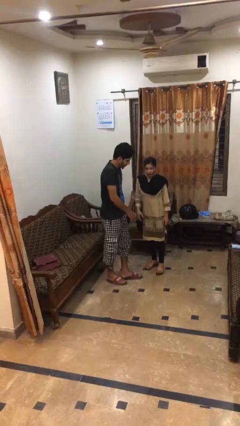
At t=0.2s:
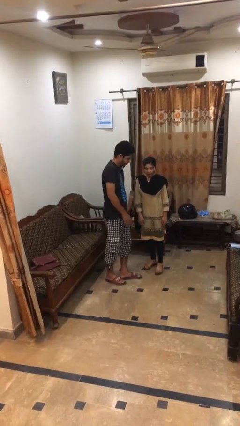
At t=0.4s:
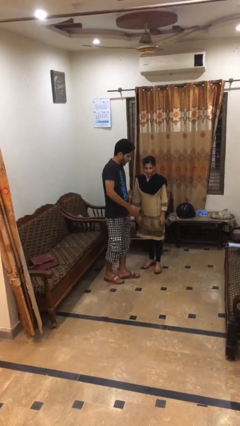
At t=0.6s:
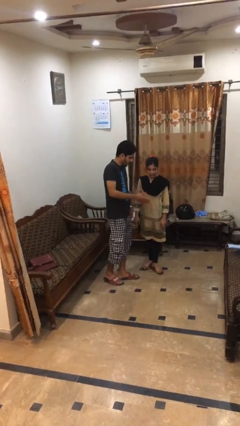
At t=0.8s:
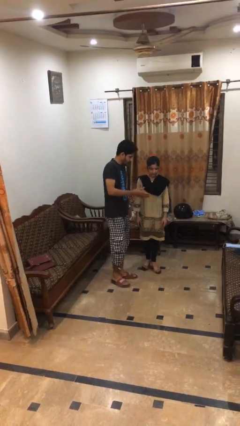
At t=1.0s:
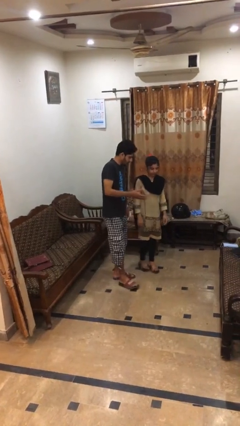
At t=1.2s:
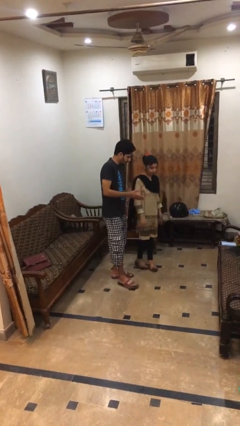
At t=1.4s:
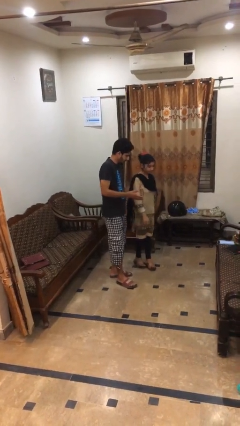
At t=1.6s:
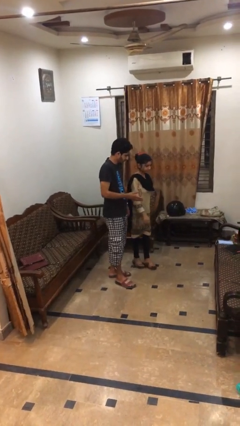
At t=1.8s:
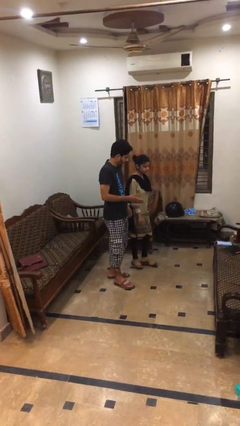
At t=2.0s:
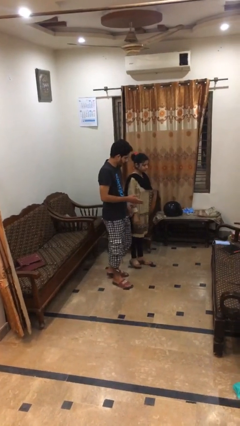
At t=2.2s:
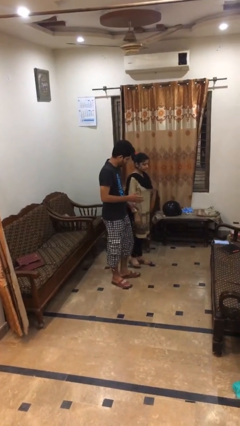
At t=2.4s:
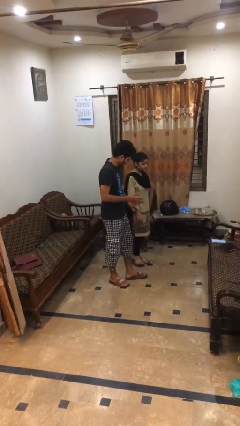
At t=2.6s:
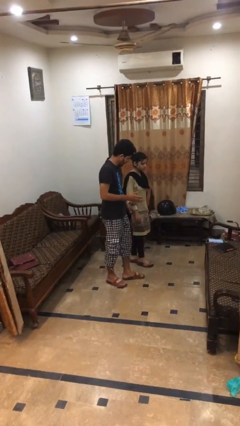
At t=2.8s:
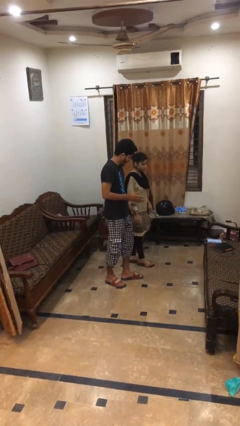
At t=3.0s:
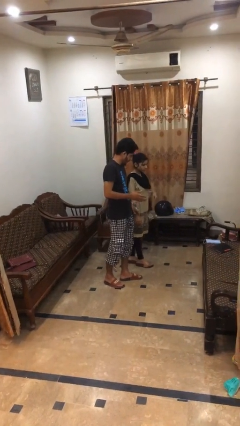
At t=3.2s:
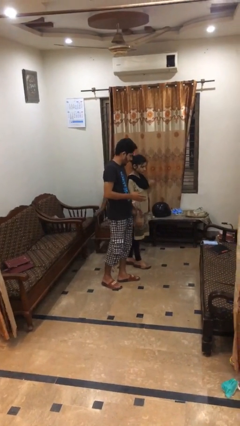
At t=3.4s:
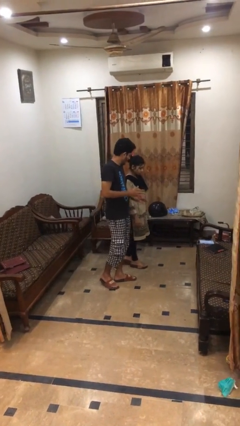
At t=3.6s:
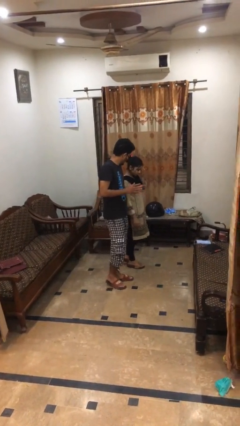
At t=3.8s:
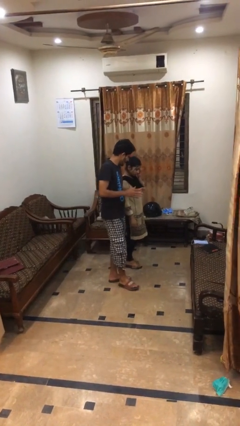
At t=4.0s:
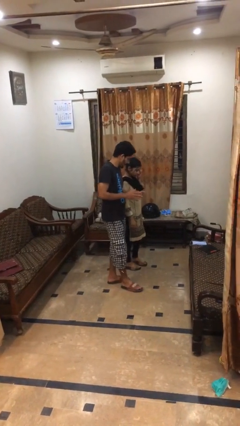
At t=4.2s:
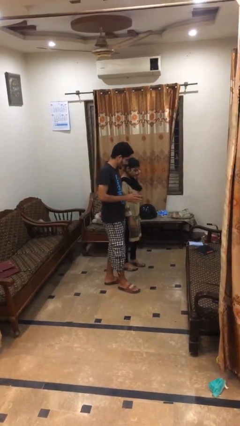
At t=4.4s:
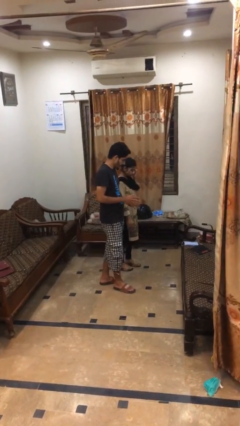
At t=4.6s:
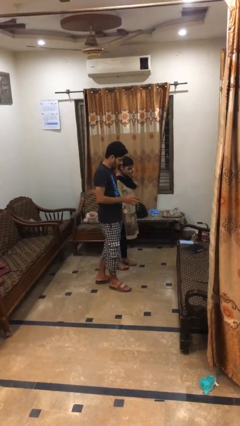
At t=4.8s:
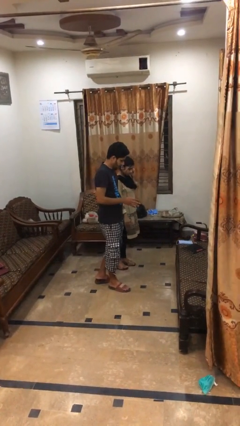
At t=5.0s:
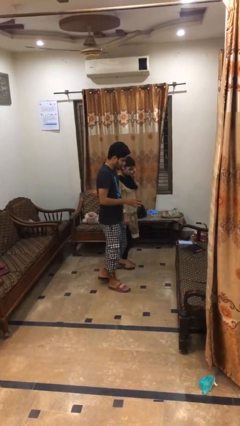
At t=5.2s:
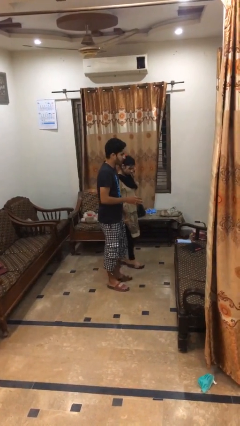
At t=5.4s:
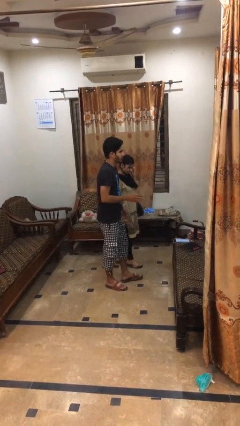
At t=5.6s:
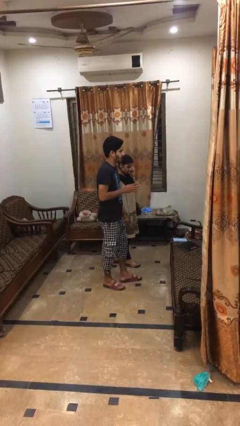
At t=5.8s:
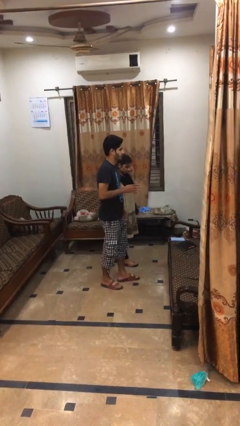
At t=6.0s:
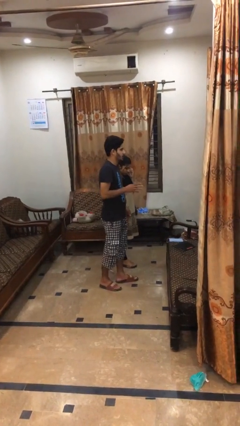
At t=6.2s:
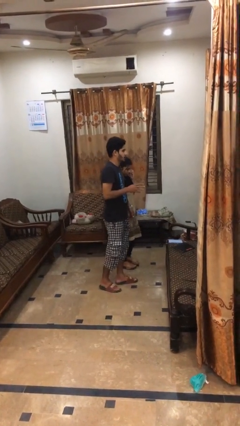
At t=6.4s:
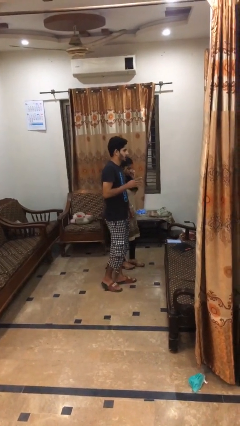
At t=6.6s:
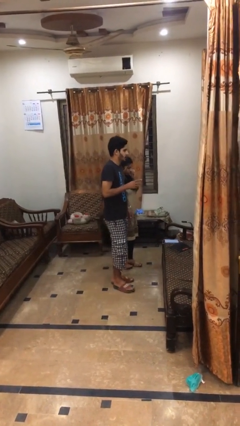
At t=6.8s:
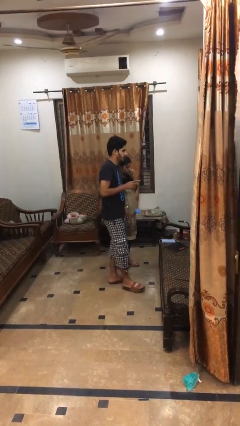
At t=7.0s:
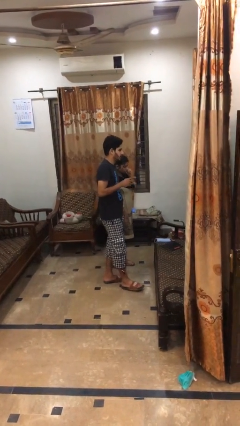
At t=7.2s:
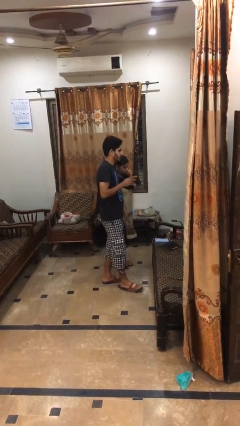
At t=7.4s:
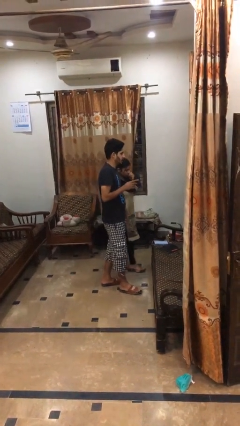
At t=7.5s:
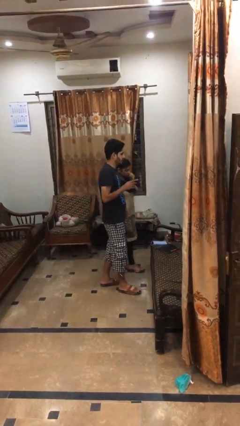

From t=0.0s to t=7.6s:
person talks to person

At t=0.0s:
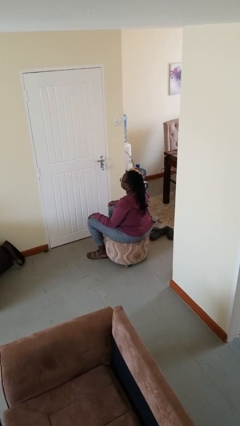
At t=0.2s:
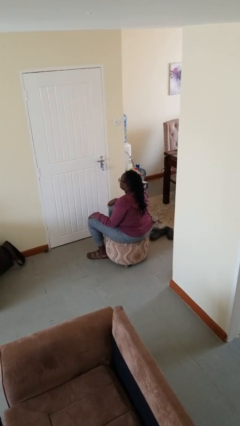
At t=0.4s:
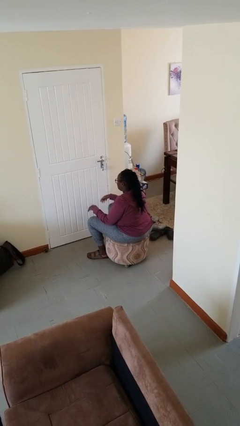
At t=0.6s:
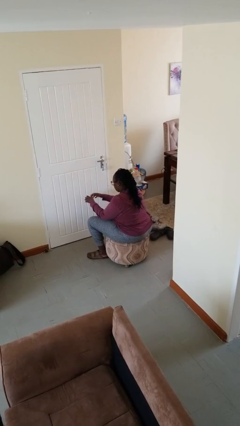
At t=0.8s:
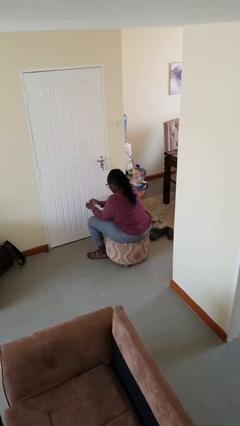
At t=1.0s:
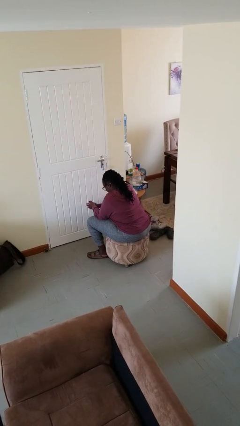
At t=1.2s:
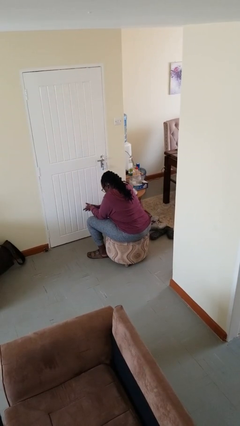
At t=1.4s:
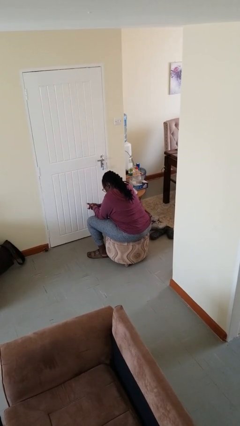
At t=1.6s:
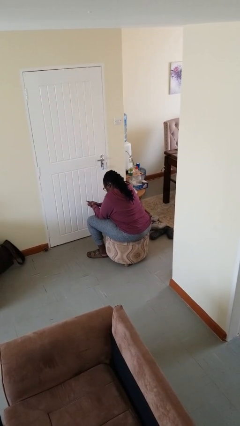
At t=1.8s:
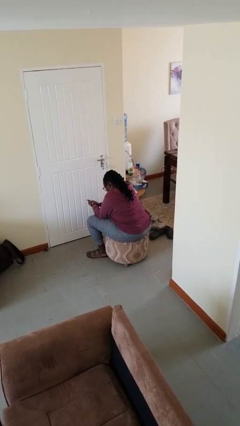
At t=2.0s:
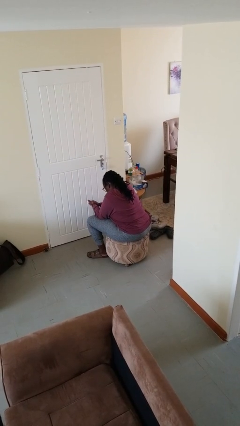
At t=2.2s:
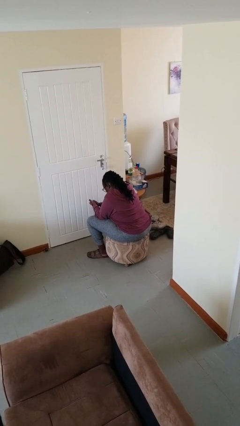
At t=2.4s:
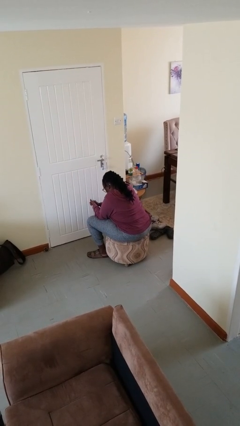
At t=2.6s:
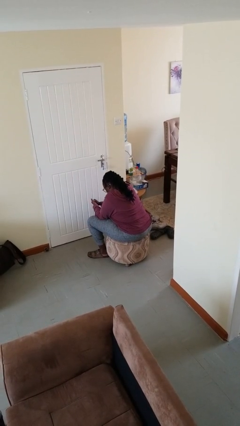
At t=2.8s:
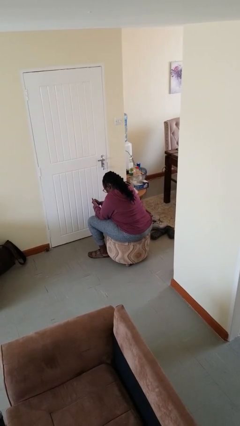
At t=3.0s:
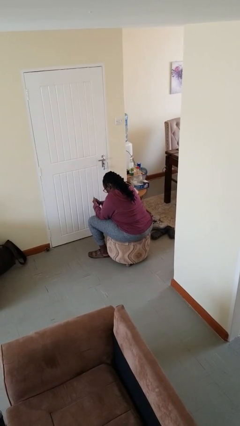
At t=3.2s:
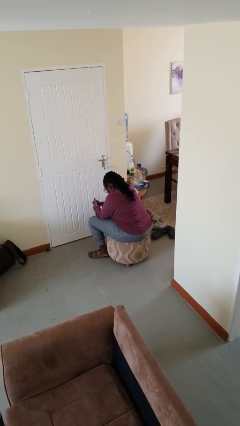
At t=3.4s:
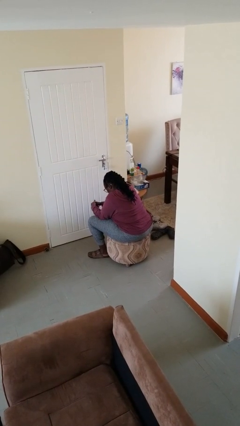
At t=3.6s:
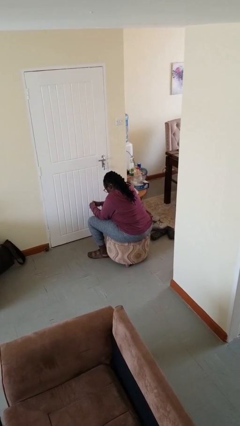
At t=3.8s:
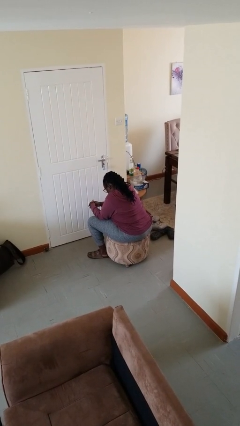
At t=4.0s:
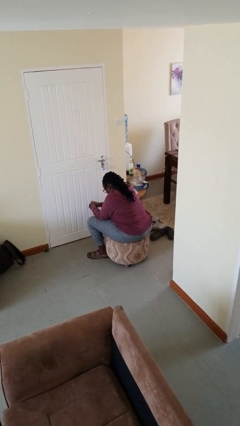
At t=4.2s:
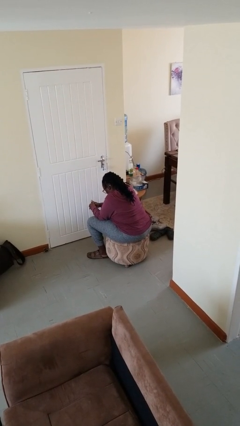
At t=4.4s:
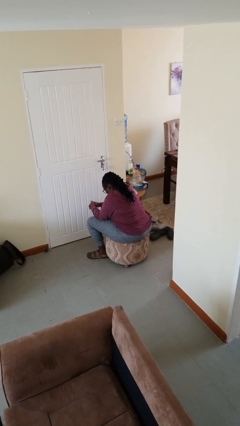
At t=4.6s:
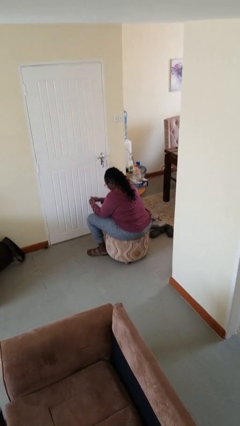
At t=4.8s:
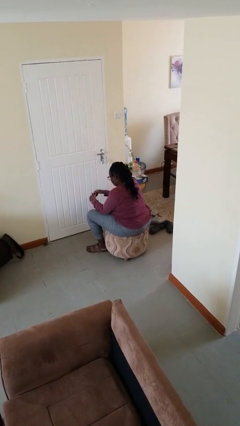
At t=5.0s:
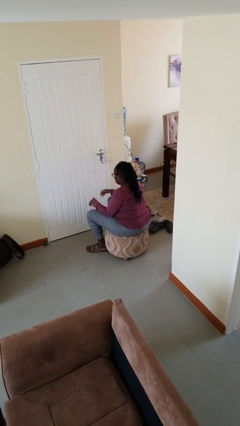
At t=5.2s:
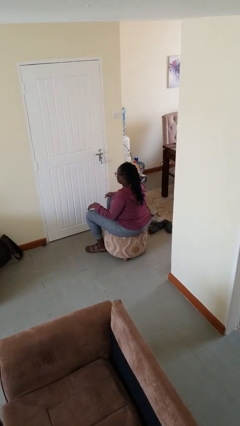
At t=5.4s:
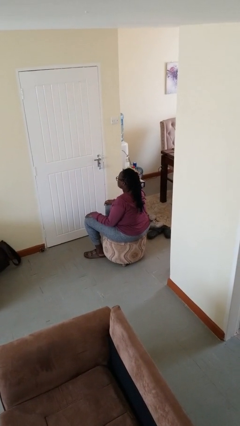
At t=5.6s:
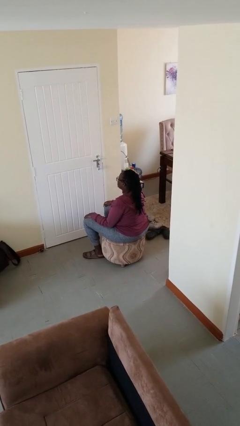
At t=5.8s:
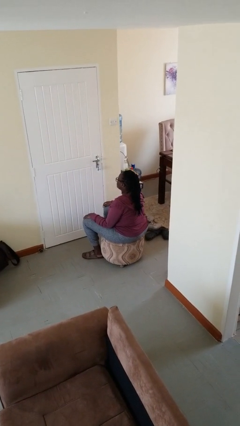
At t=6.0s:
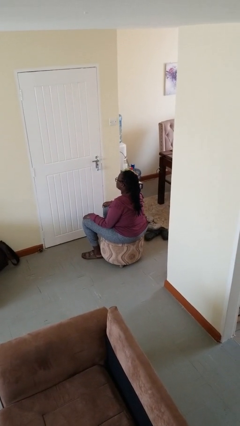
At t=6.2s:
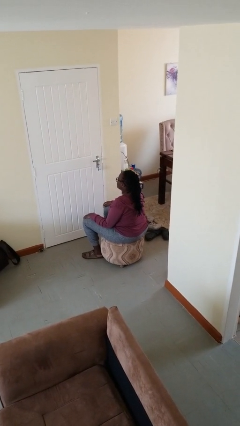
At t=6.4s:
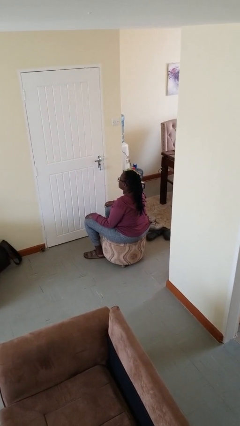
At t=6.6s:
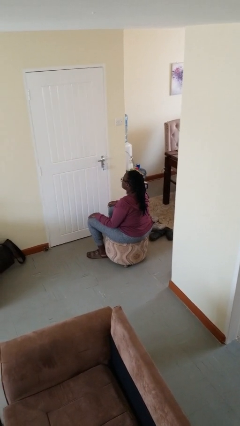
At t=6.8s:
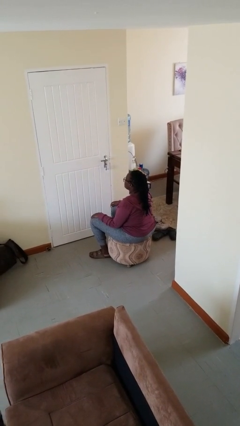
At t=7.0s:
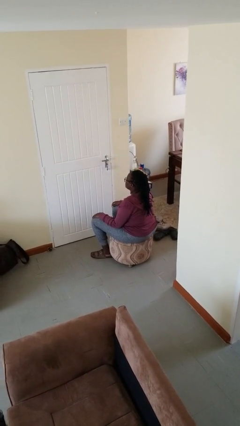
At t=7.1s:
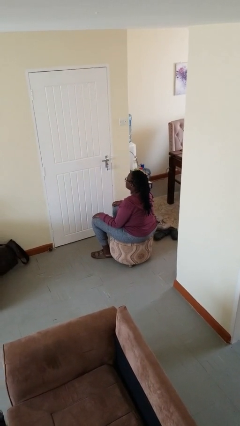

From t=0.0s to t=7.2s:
person looks at hands in lap

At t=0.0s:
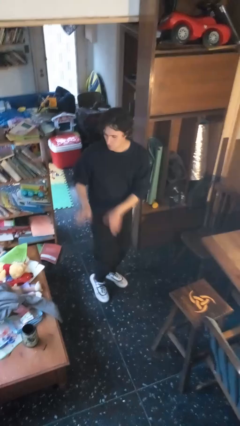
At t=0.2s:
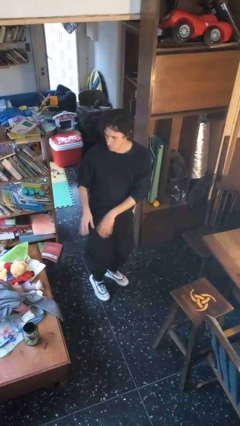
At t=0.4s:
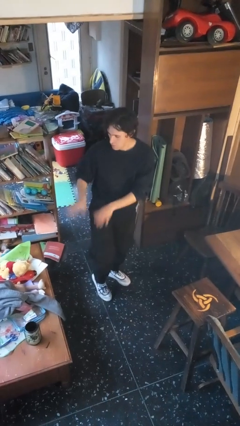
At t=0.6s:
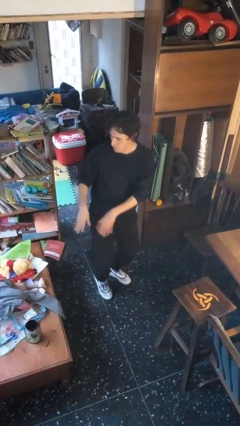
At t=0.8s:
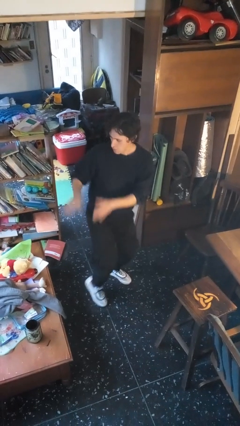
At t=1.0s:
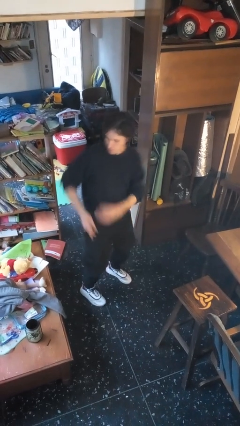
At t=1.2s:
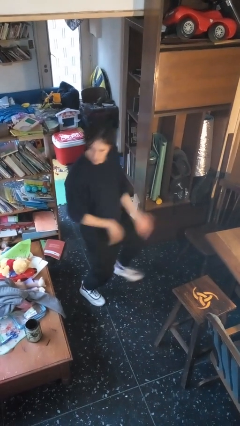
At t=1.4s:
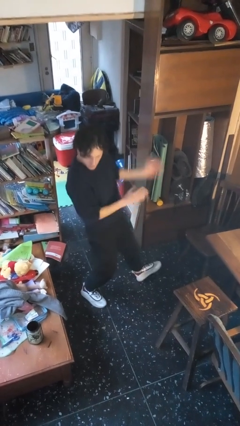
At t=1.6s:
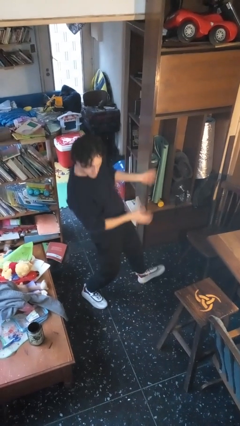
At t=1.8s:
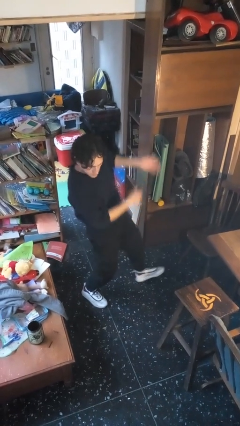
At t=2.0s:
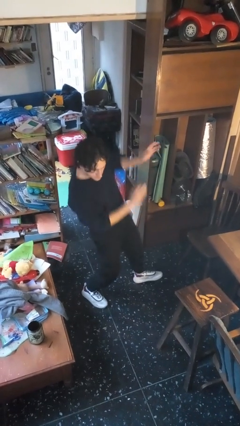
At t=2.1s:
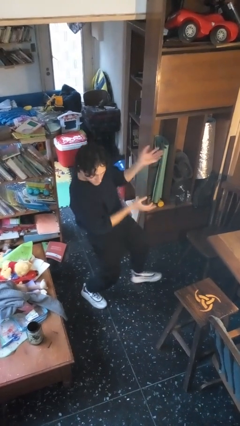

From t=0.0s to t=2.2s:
person dances in place

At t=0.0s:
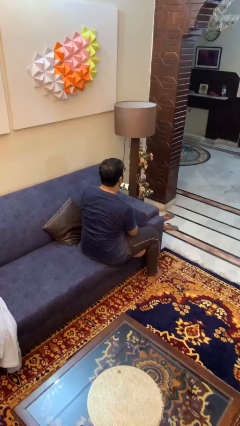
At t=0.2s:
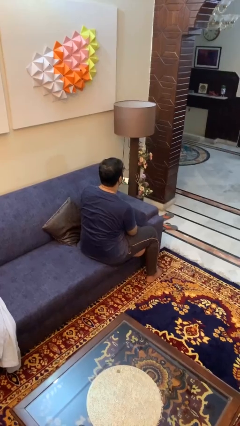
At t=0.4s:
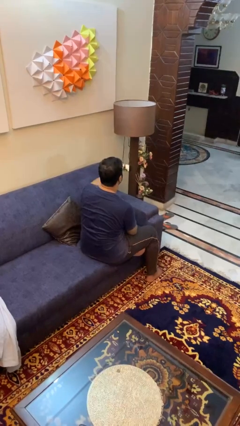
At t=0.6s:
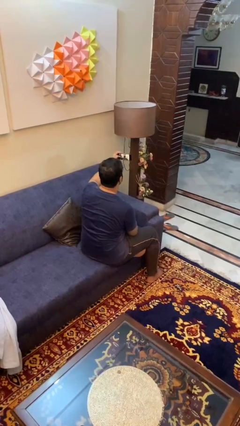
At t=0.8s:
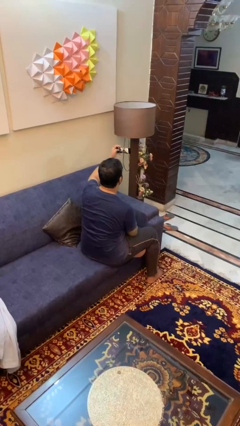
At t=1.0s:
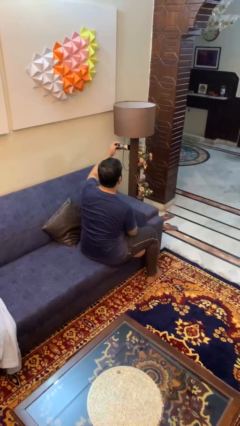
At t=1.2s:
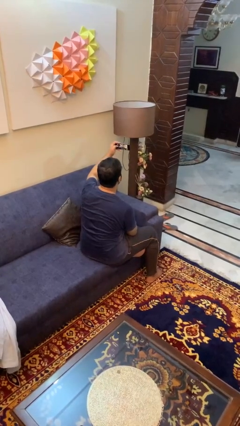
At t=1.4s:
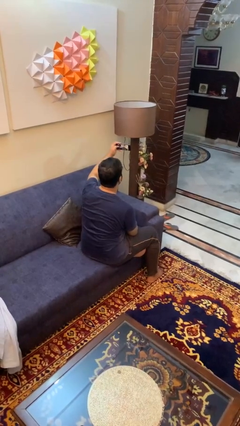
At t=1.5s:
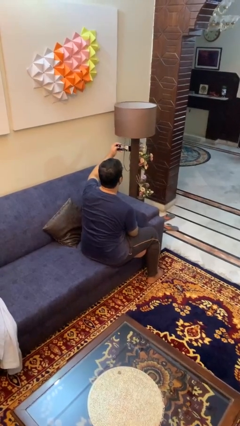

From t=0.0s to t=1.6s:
person takes selfie
